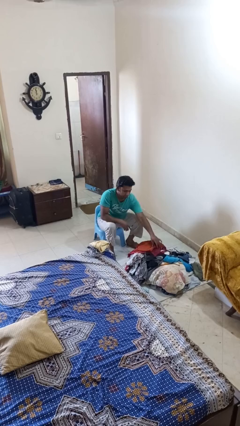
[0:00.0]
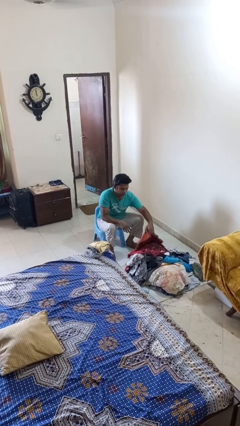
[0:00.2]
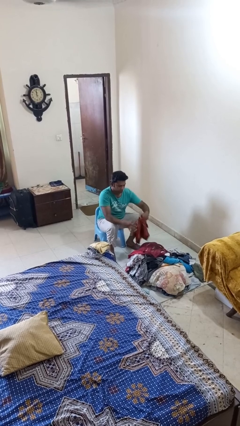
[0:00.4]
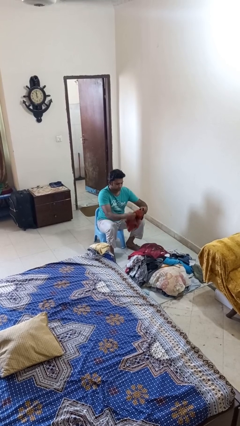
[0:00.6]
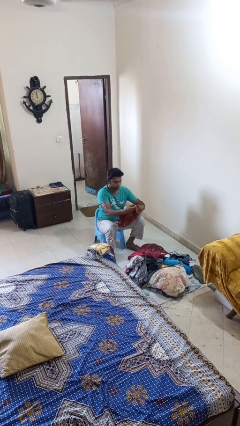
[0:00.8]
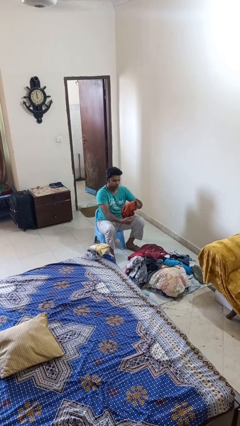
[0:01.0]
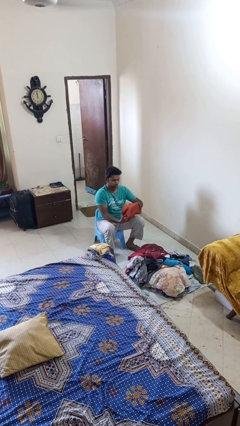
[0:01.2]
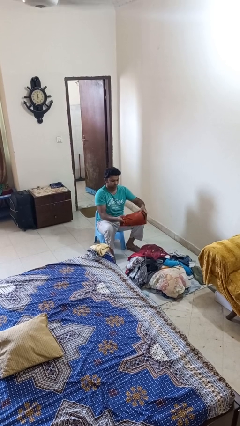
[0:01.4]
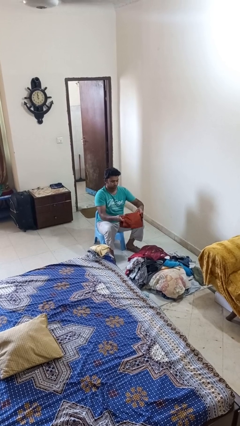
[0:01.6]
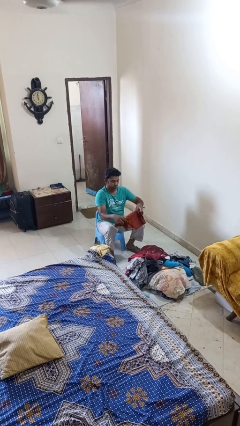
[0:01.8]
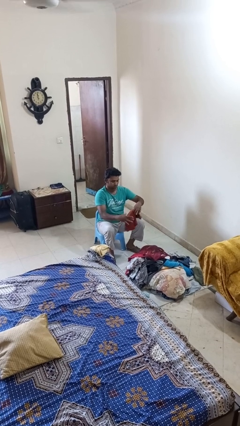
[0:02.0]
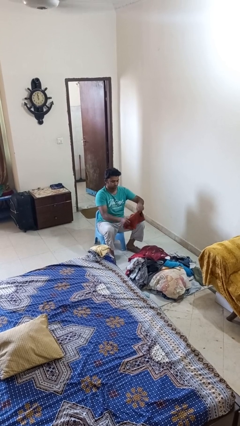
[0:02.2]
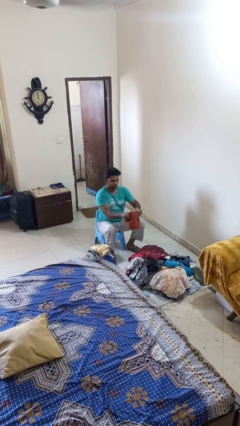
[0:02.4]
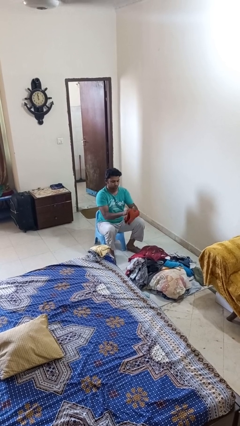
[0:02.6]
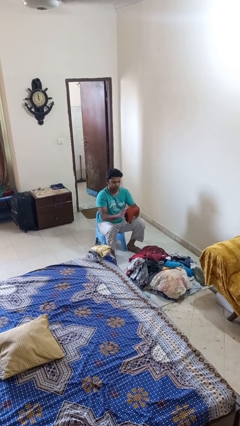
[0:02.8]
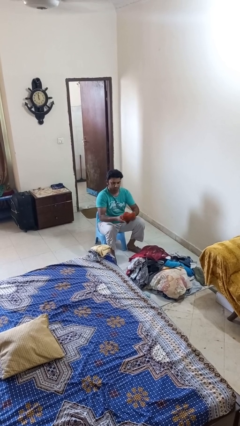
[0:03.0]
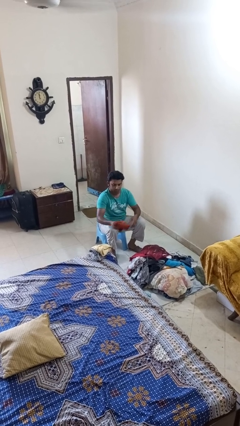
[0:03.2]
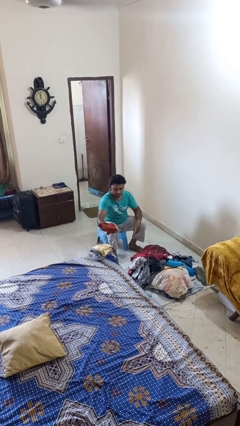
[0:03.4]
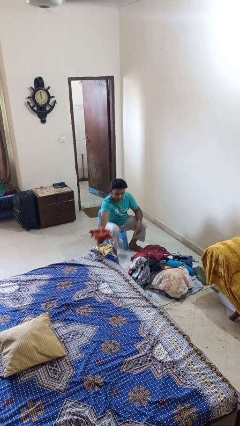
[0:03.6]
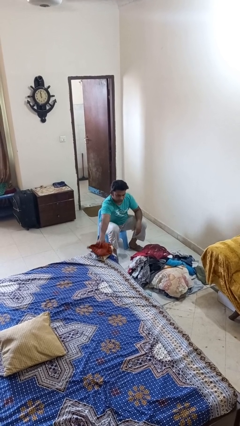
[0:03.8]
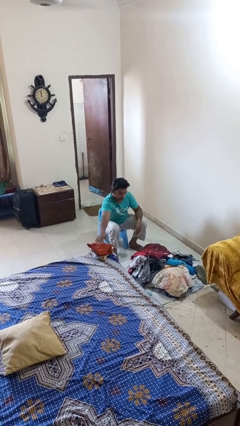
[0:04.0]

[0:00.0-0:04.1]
person folds shirt

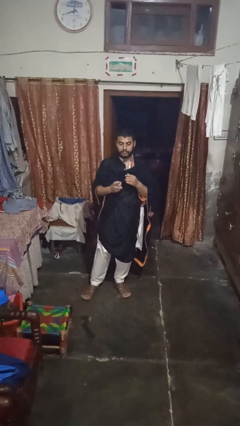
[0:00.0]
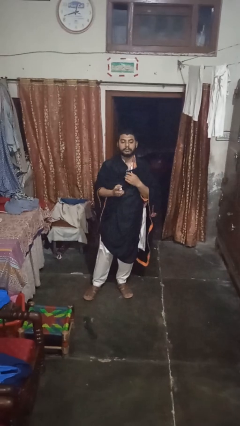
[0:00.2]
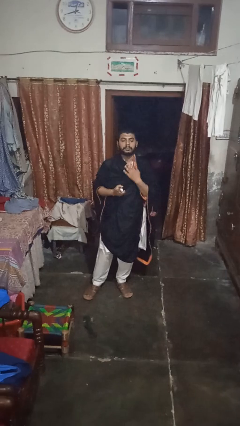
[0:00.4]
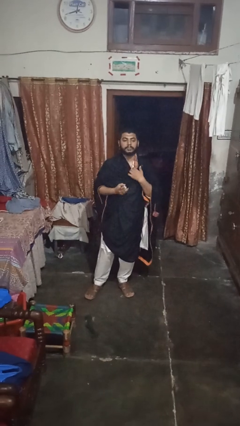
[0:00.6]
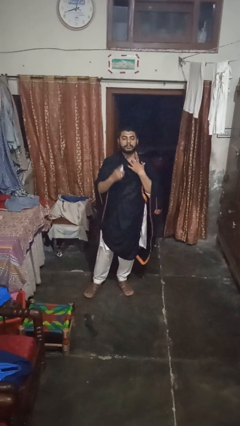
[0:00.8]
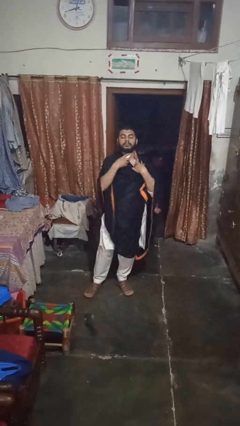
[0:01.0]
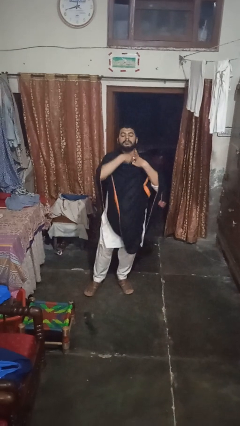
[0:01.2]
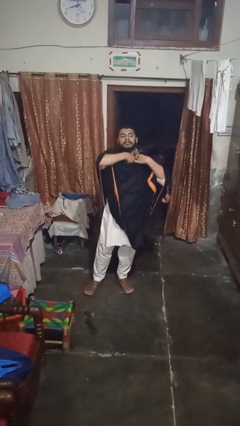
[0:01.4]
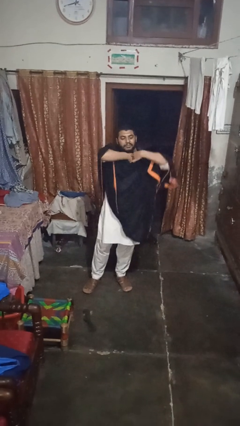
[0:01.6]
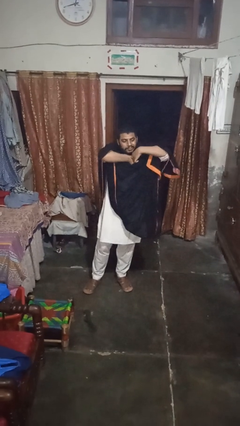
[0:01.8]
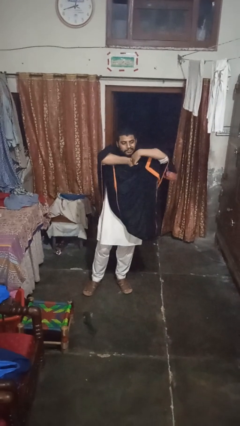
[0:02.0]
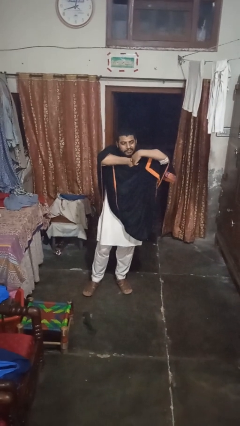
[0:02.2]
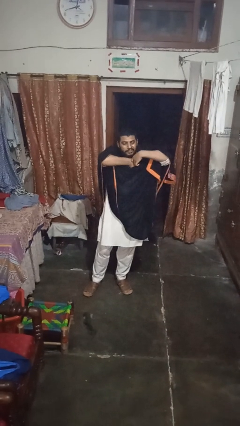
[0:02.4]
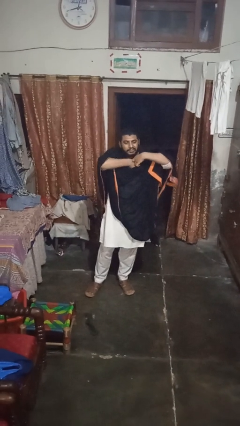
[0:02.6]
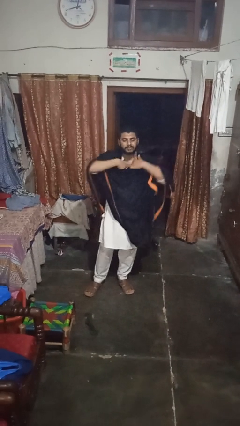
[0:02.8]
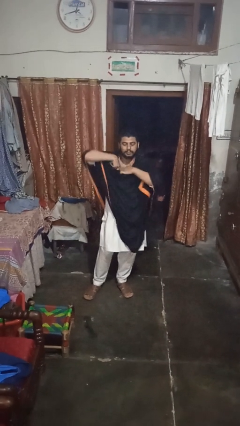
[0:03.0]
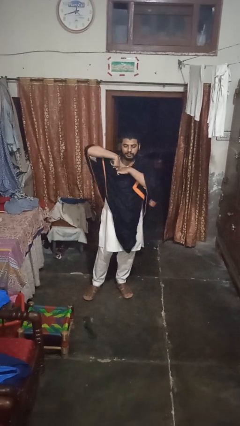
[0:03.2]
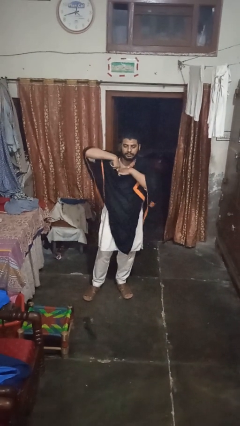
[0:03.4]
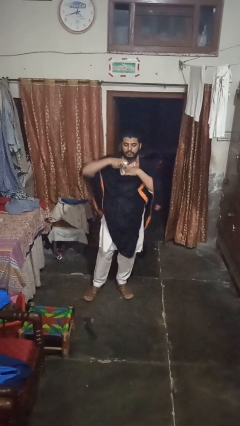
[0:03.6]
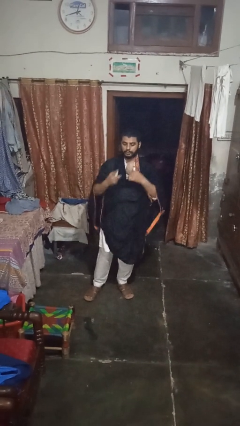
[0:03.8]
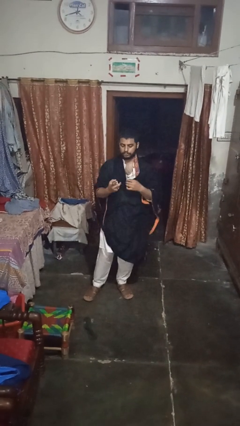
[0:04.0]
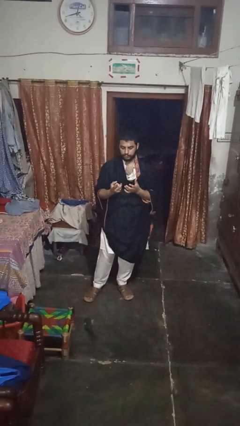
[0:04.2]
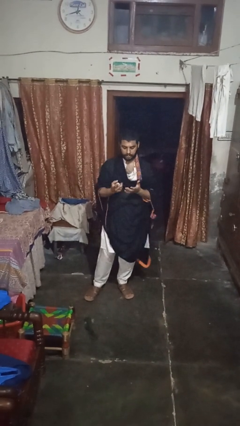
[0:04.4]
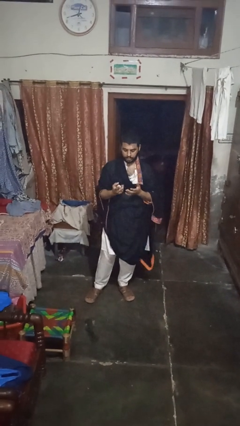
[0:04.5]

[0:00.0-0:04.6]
person applies deodorant

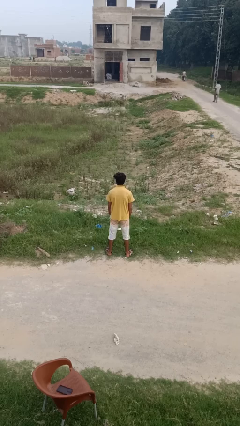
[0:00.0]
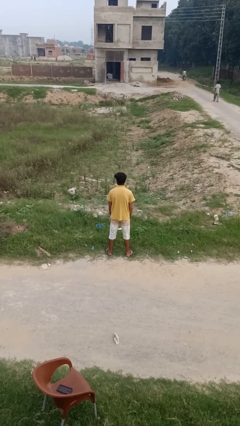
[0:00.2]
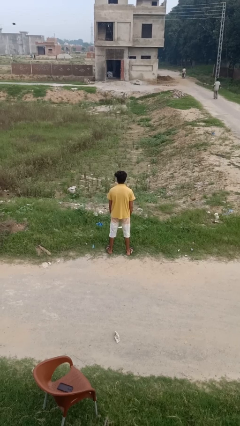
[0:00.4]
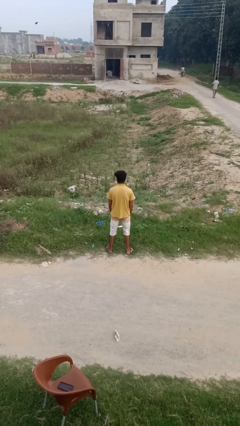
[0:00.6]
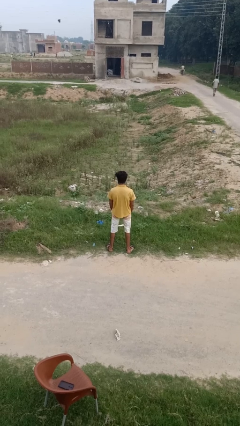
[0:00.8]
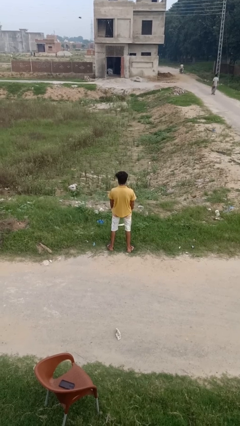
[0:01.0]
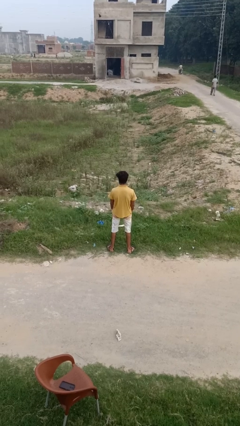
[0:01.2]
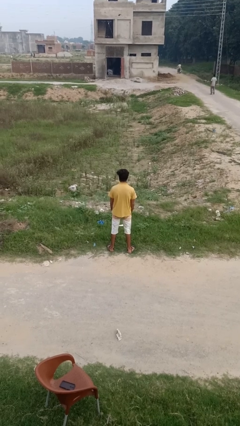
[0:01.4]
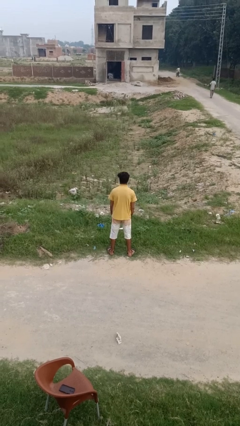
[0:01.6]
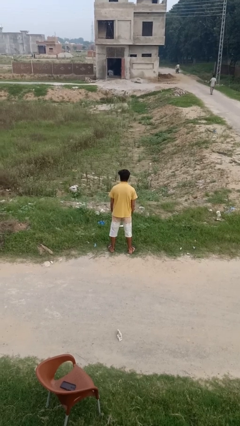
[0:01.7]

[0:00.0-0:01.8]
person wiggles hips

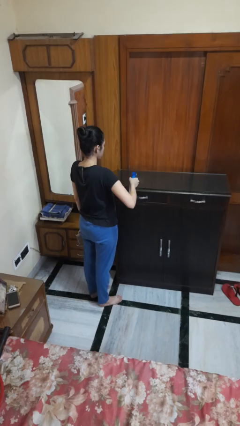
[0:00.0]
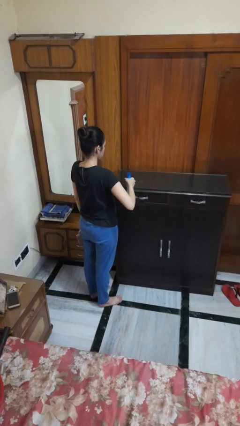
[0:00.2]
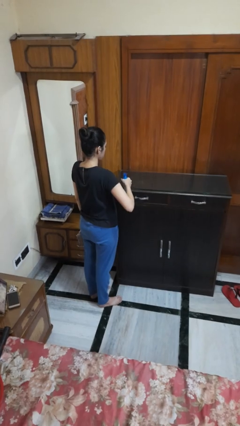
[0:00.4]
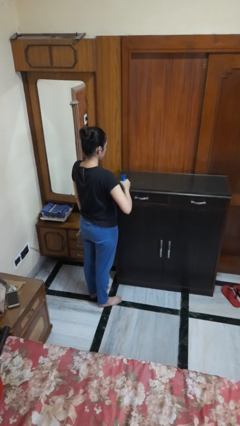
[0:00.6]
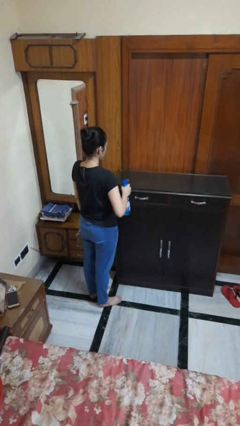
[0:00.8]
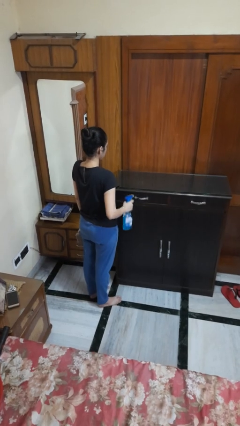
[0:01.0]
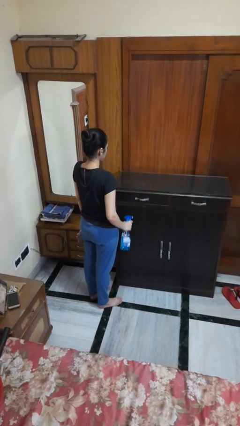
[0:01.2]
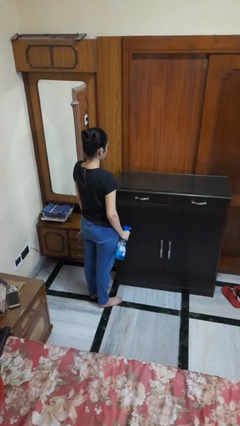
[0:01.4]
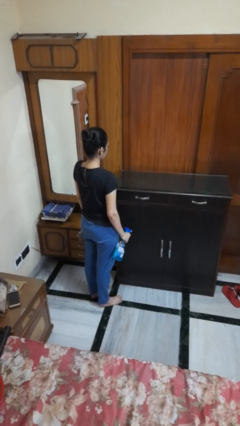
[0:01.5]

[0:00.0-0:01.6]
person sprays from bottle

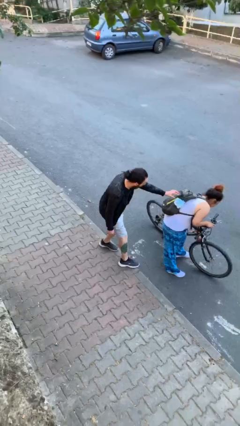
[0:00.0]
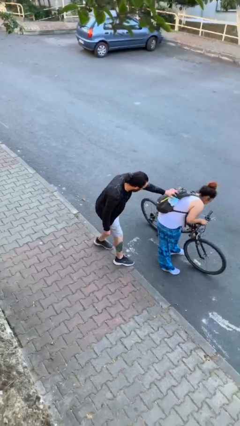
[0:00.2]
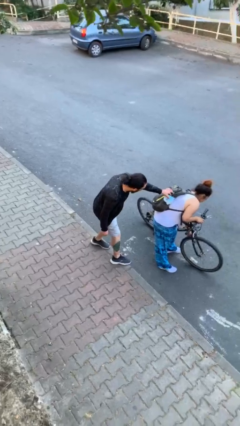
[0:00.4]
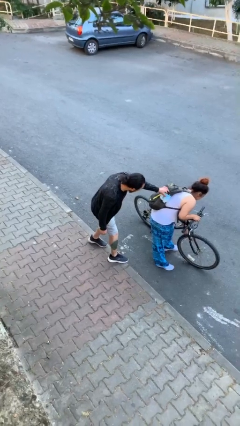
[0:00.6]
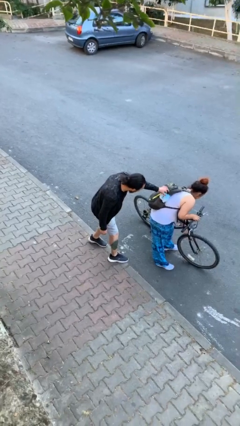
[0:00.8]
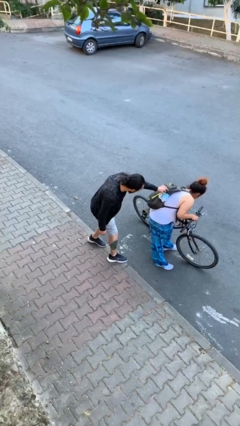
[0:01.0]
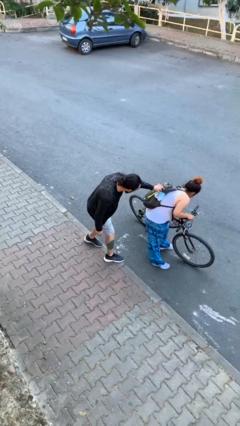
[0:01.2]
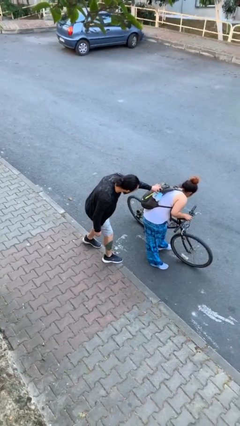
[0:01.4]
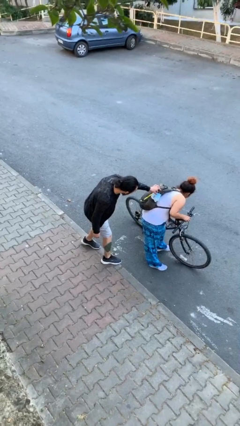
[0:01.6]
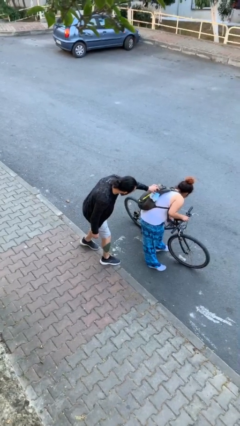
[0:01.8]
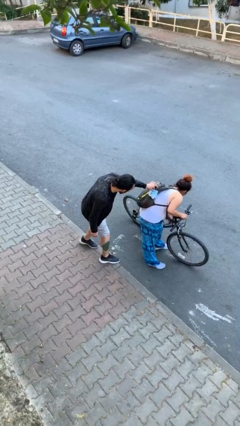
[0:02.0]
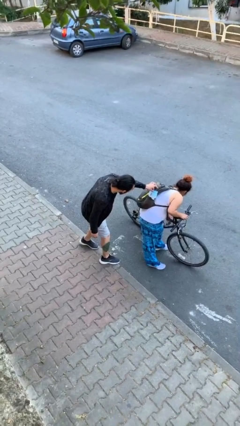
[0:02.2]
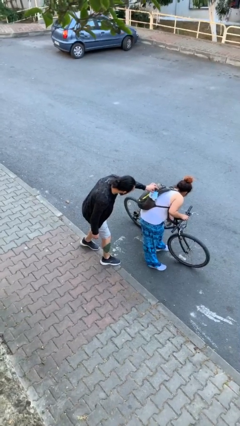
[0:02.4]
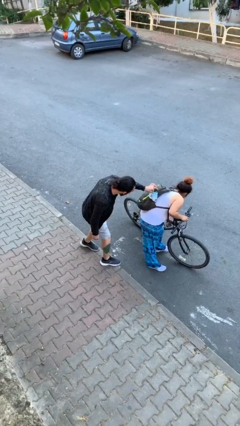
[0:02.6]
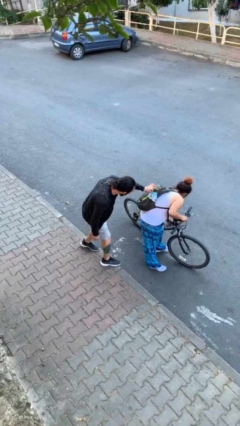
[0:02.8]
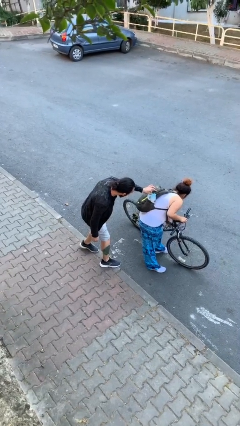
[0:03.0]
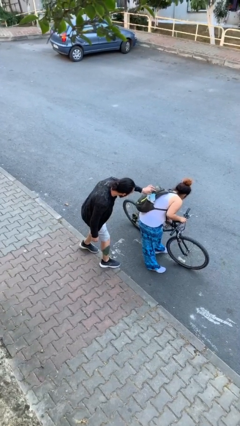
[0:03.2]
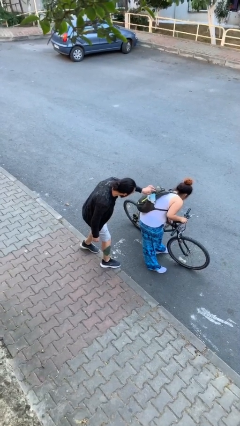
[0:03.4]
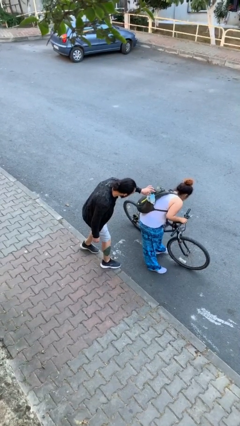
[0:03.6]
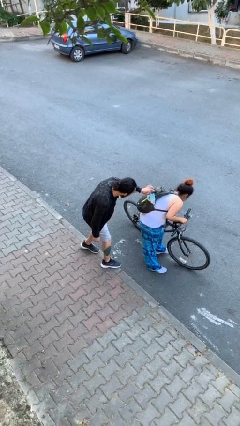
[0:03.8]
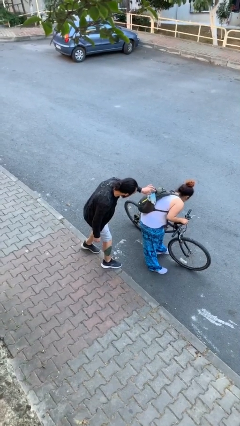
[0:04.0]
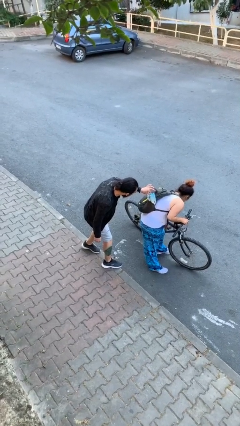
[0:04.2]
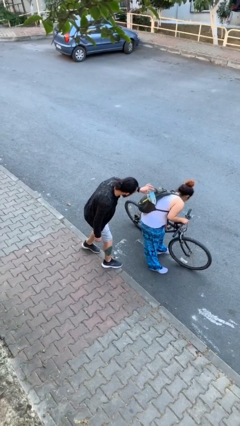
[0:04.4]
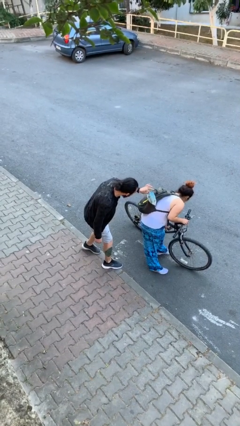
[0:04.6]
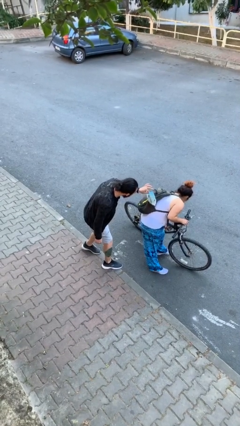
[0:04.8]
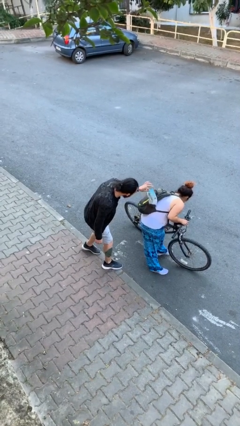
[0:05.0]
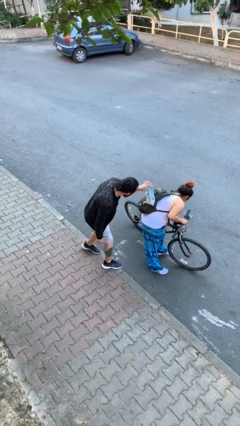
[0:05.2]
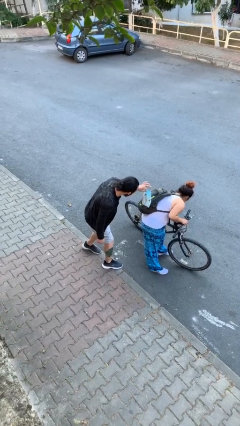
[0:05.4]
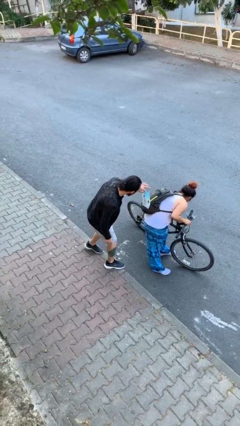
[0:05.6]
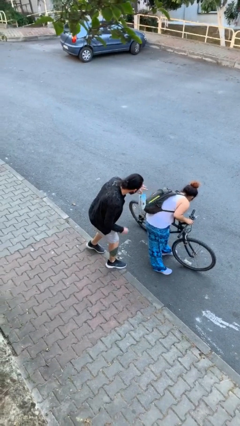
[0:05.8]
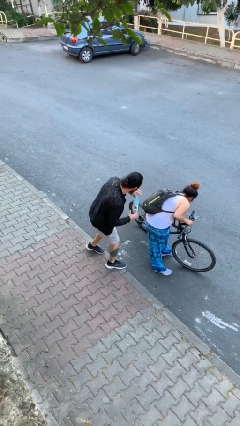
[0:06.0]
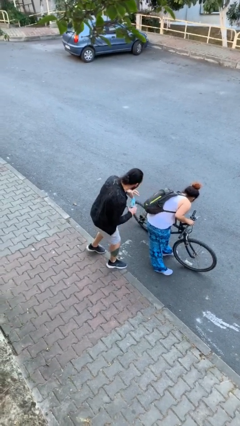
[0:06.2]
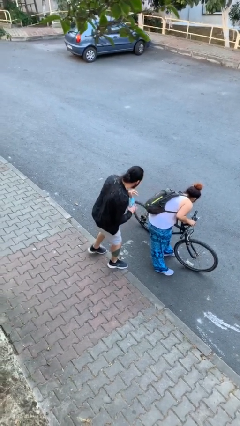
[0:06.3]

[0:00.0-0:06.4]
person steals object from person
